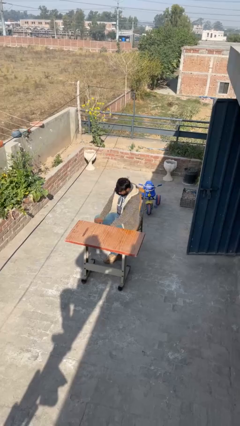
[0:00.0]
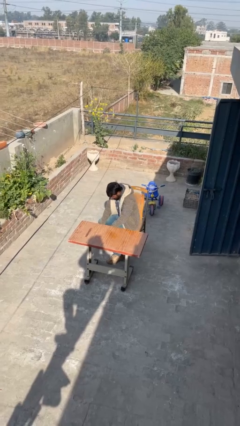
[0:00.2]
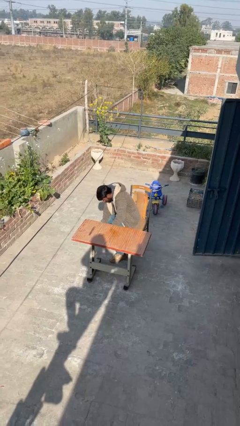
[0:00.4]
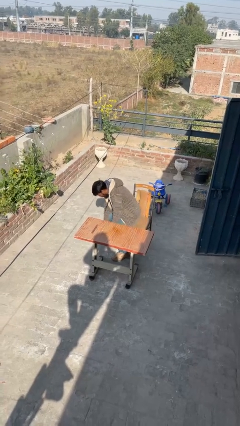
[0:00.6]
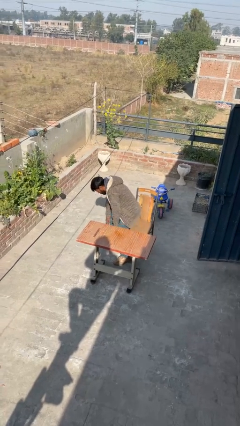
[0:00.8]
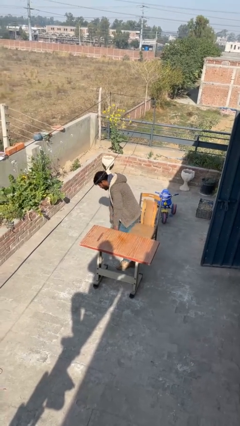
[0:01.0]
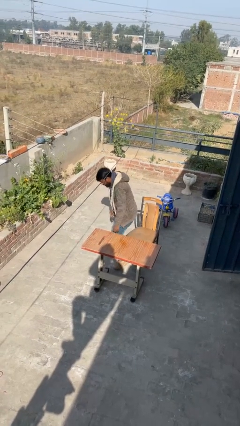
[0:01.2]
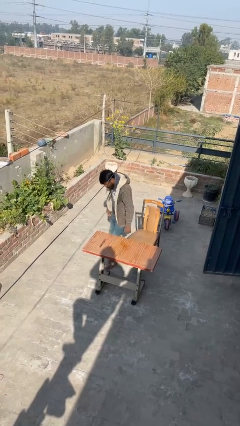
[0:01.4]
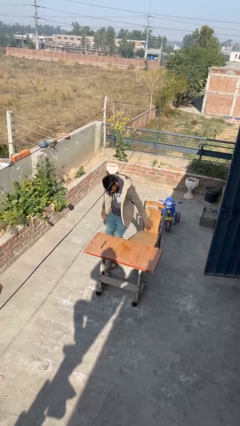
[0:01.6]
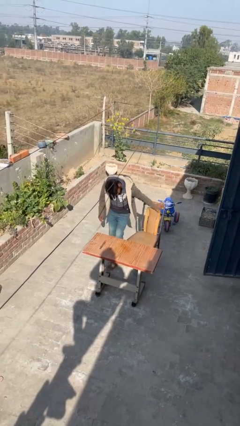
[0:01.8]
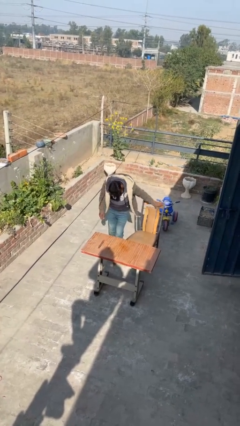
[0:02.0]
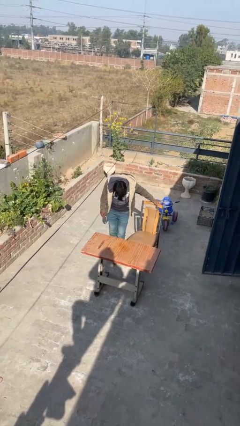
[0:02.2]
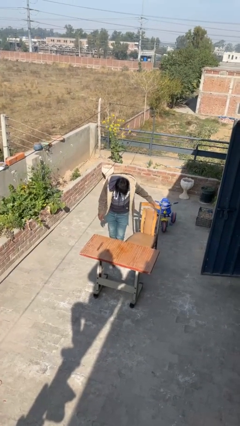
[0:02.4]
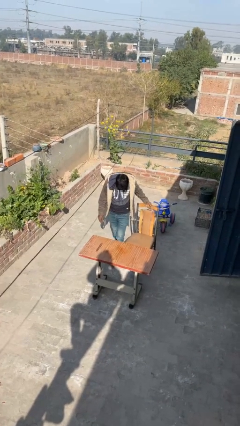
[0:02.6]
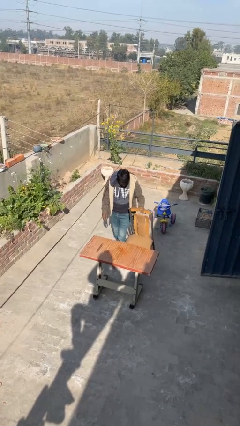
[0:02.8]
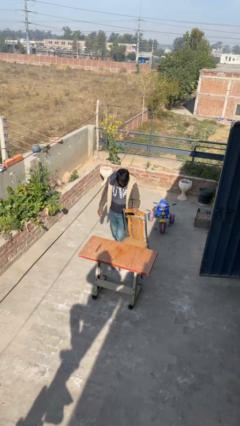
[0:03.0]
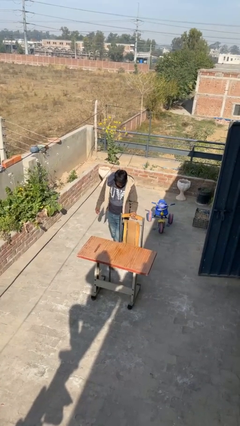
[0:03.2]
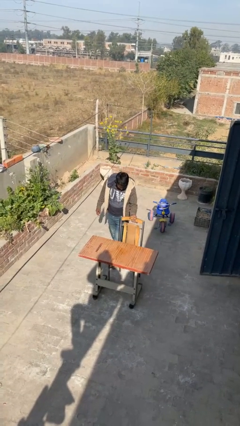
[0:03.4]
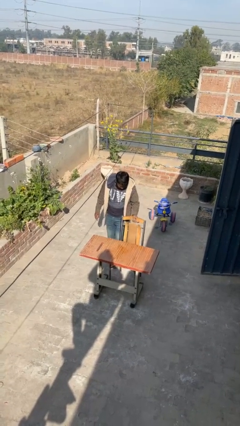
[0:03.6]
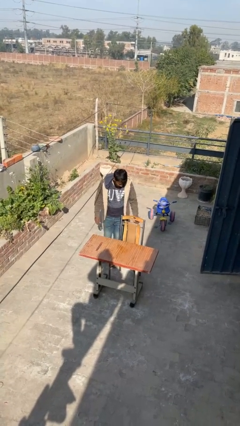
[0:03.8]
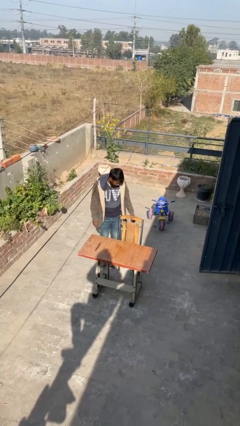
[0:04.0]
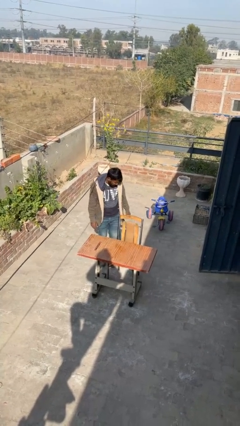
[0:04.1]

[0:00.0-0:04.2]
person stands up

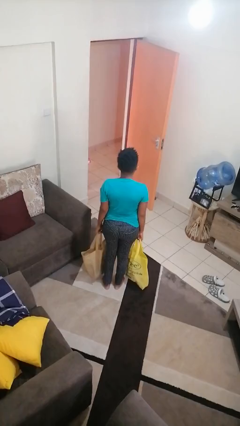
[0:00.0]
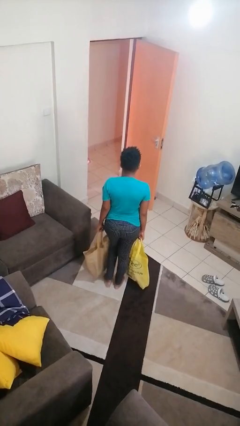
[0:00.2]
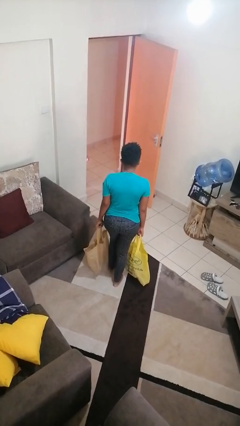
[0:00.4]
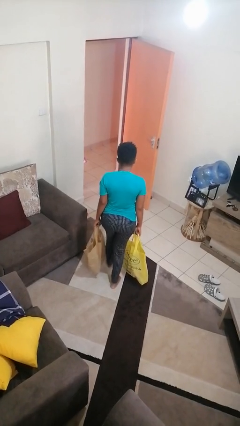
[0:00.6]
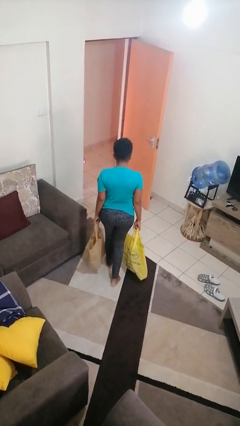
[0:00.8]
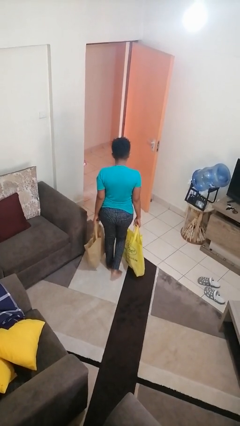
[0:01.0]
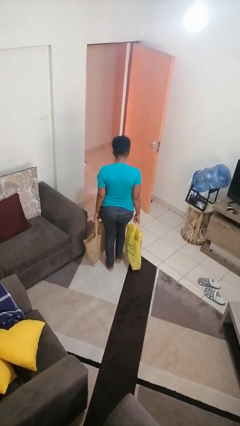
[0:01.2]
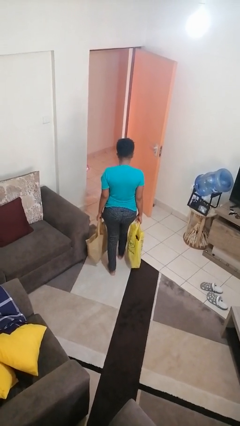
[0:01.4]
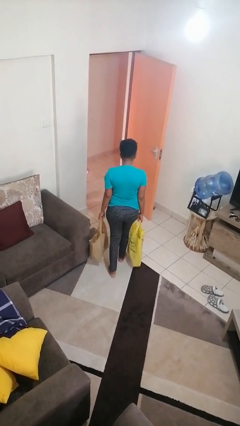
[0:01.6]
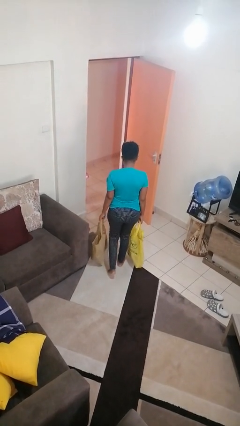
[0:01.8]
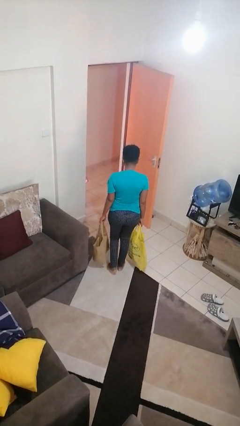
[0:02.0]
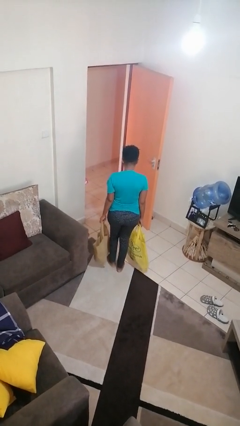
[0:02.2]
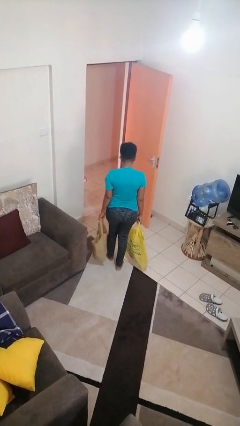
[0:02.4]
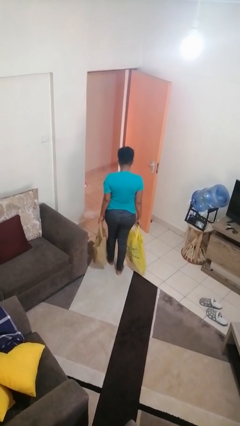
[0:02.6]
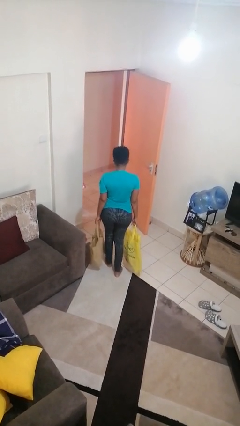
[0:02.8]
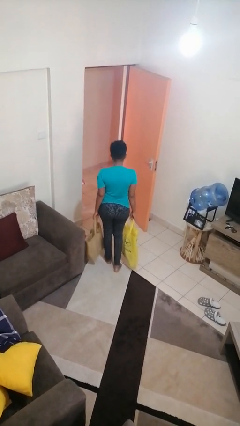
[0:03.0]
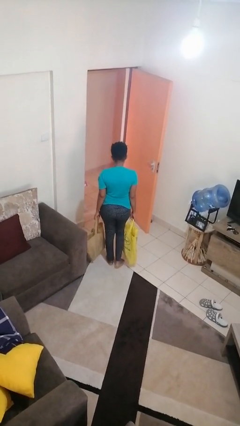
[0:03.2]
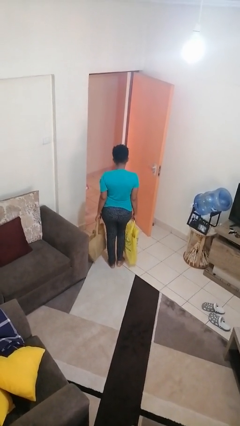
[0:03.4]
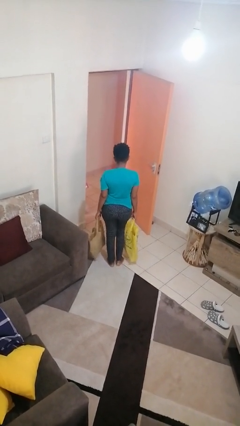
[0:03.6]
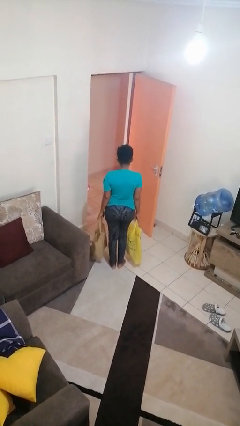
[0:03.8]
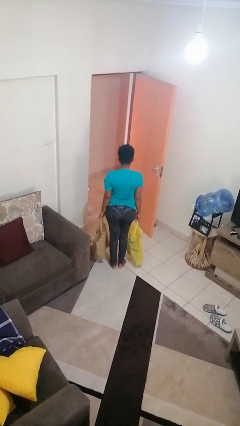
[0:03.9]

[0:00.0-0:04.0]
person carries groceries

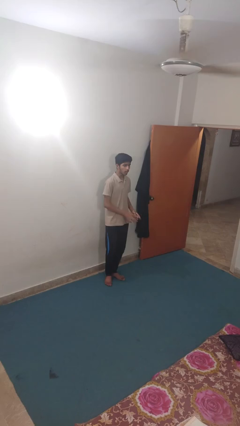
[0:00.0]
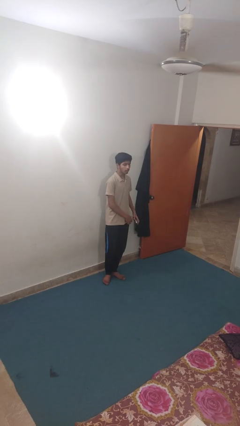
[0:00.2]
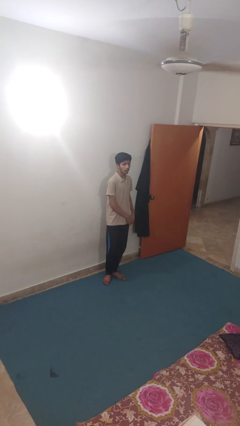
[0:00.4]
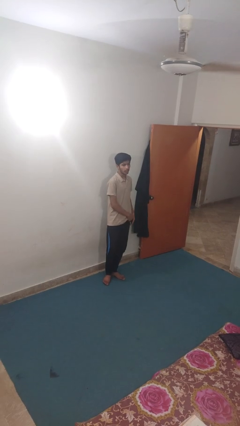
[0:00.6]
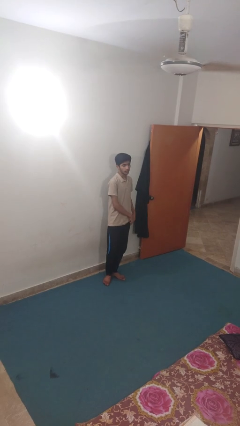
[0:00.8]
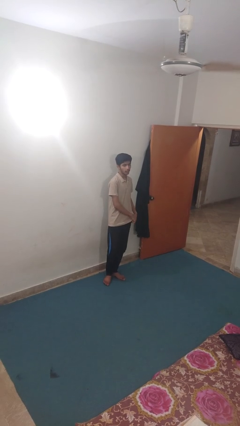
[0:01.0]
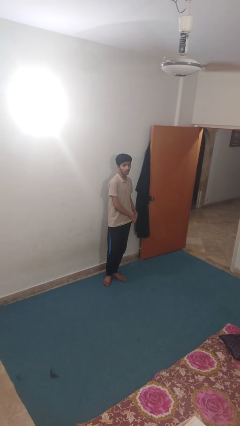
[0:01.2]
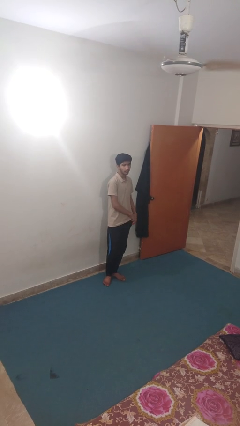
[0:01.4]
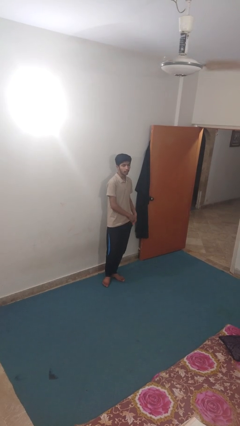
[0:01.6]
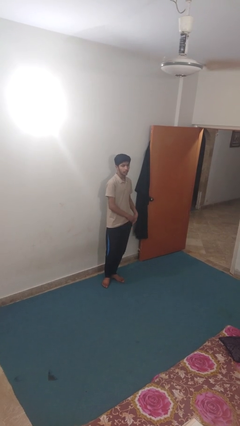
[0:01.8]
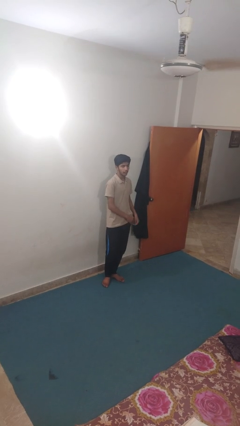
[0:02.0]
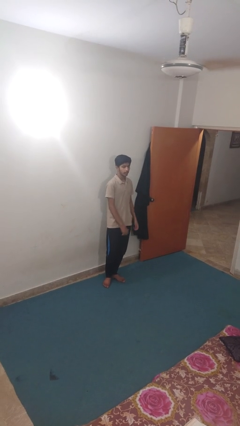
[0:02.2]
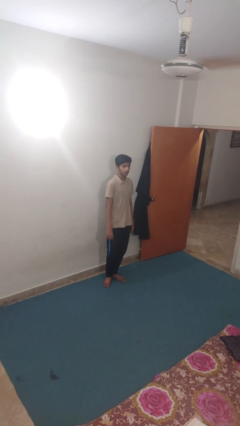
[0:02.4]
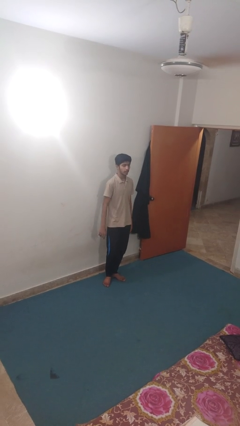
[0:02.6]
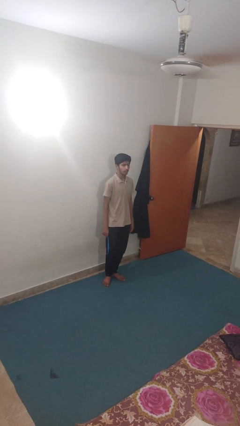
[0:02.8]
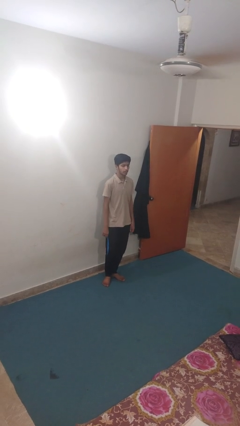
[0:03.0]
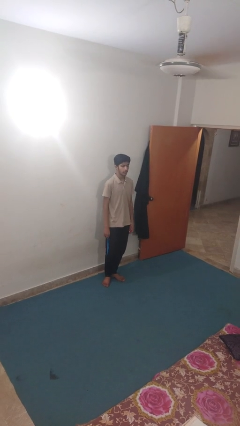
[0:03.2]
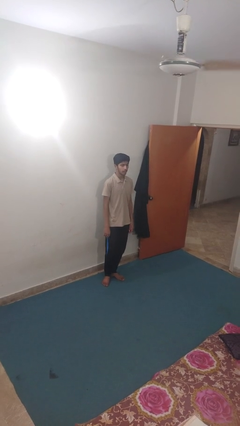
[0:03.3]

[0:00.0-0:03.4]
person puts phone into pocket

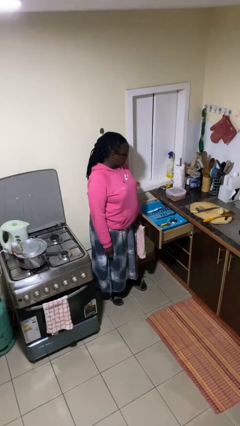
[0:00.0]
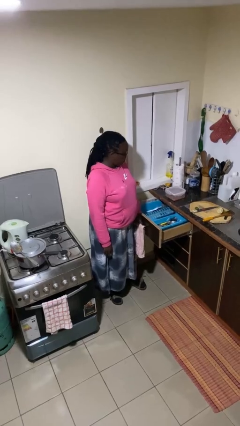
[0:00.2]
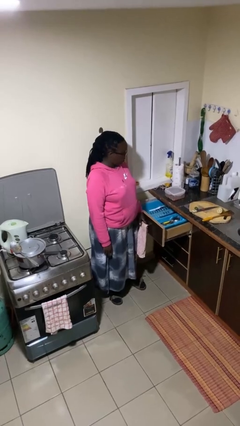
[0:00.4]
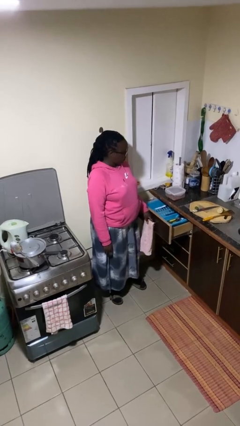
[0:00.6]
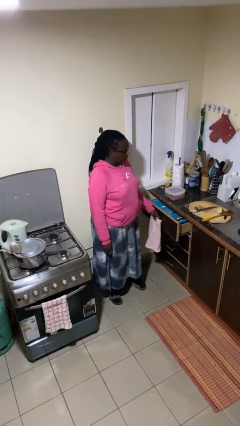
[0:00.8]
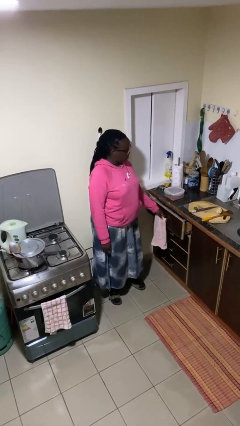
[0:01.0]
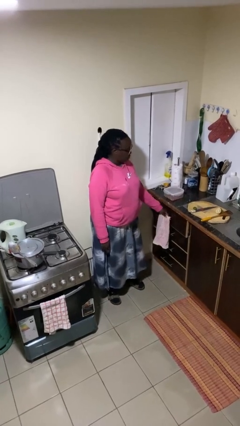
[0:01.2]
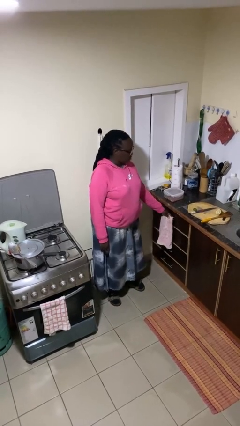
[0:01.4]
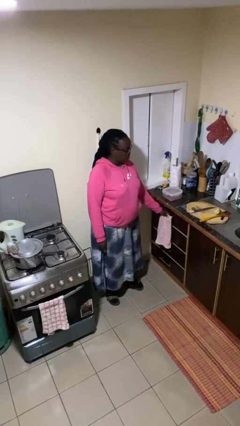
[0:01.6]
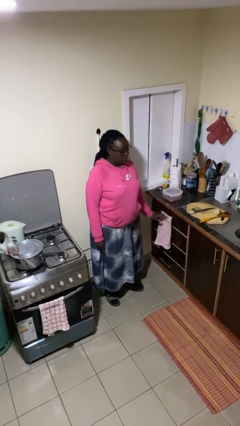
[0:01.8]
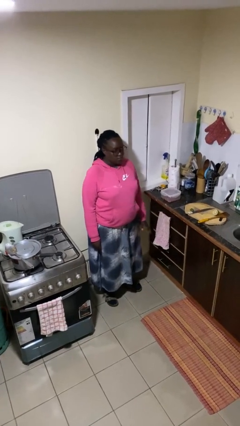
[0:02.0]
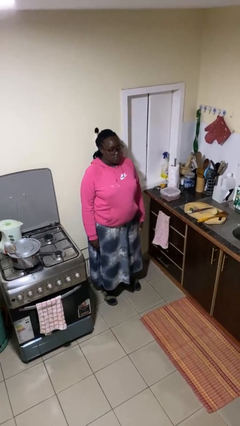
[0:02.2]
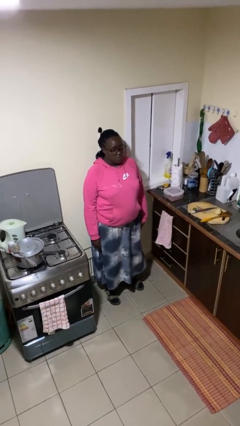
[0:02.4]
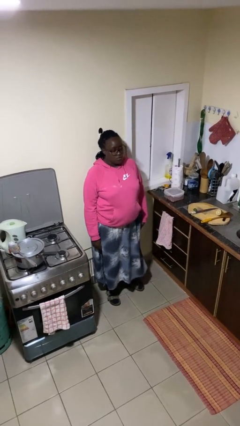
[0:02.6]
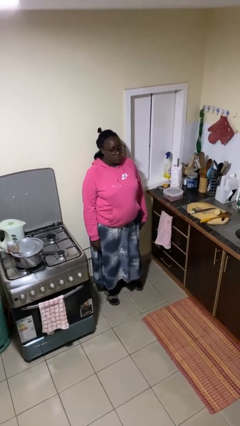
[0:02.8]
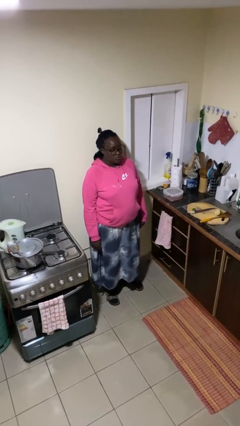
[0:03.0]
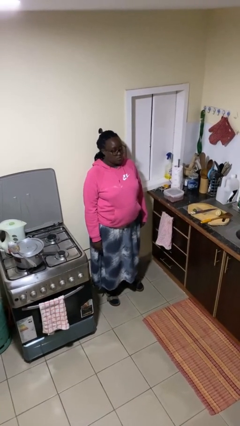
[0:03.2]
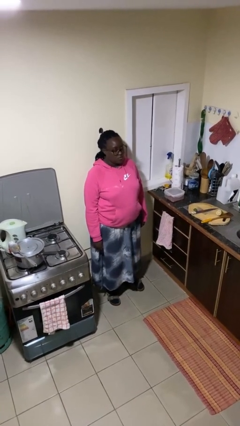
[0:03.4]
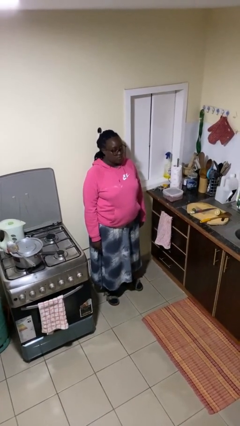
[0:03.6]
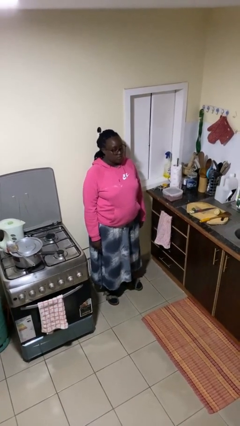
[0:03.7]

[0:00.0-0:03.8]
person closes kitchen drawer

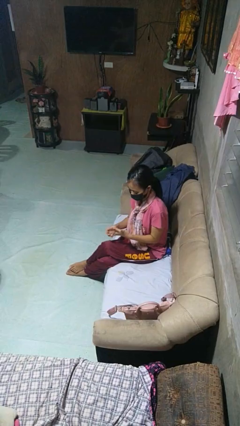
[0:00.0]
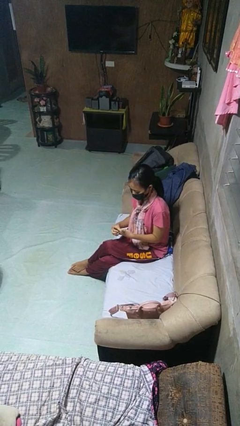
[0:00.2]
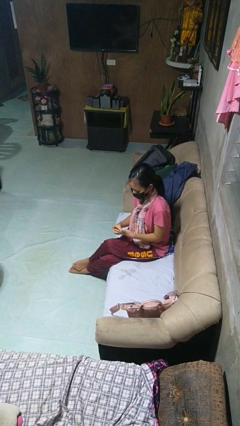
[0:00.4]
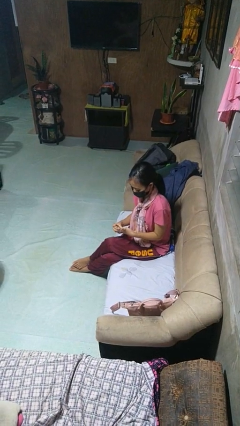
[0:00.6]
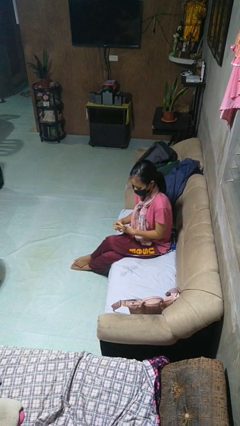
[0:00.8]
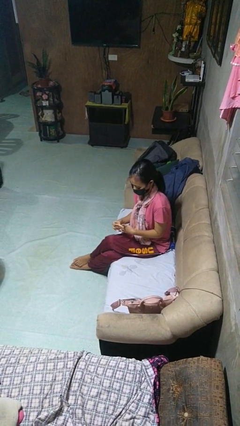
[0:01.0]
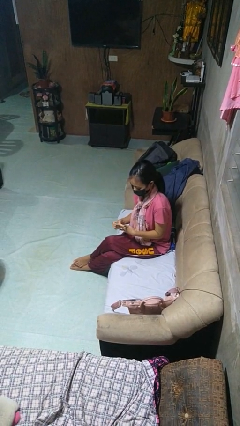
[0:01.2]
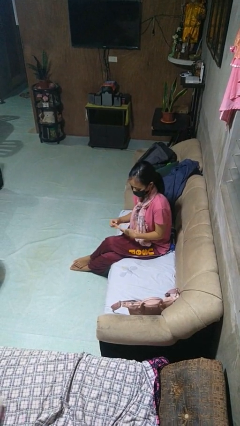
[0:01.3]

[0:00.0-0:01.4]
person takes off ring

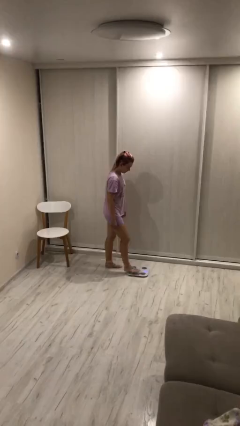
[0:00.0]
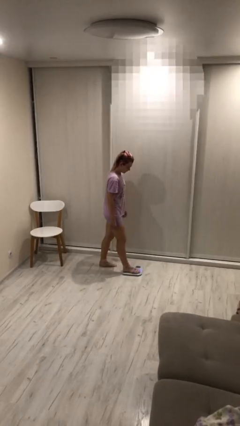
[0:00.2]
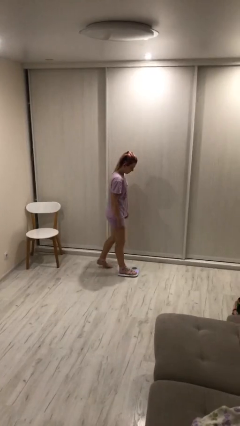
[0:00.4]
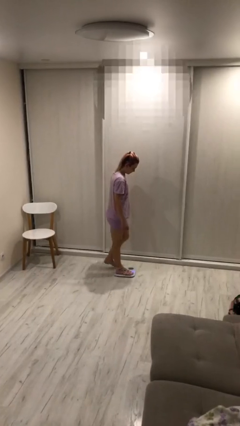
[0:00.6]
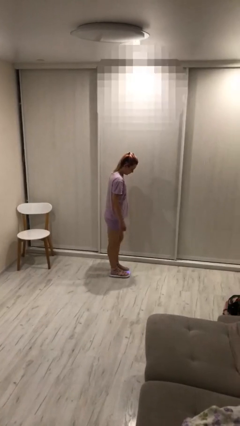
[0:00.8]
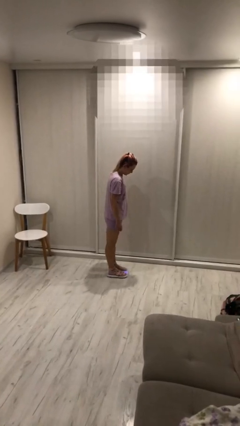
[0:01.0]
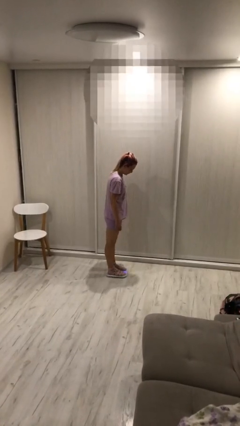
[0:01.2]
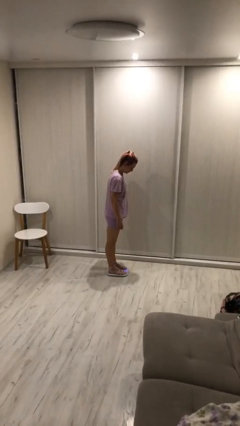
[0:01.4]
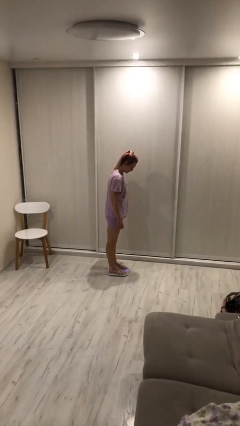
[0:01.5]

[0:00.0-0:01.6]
person uses bodyweight scale
